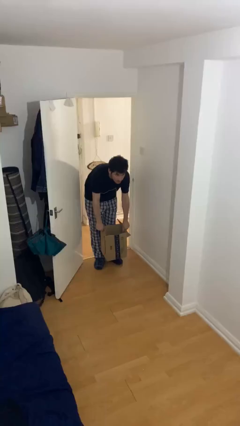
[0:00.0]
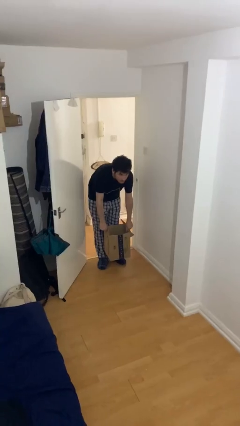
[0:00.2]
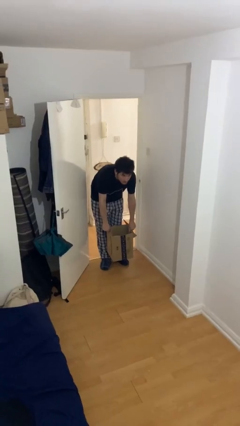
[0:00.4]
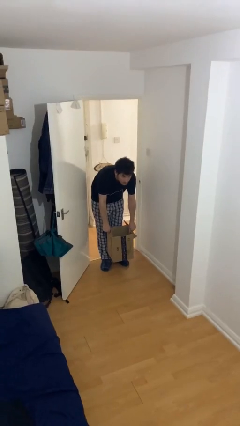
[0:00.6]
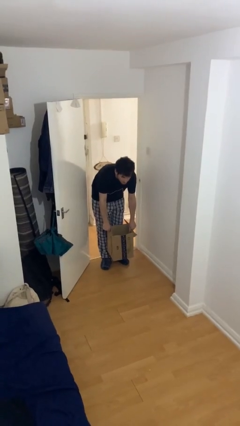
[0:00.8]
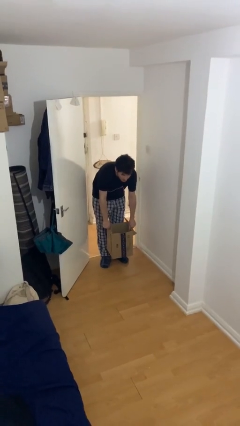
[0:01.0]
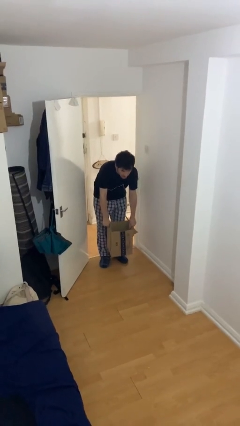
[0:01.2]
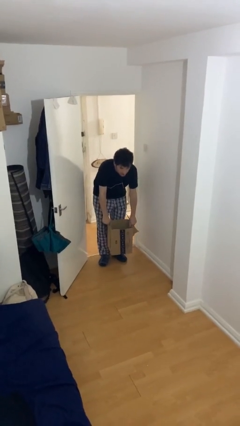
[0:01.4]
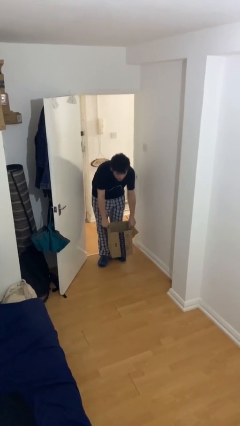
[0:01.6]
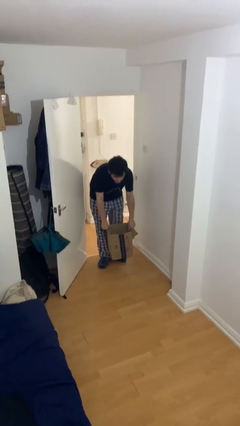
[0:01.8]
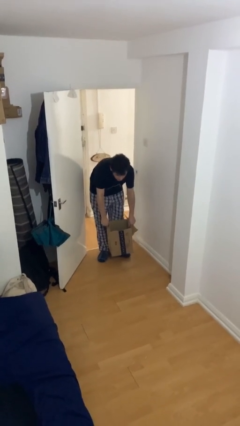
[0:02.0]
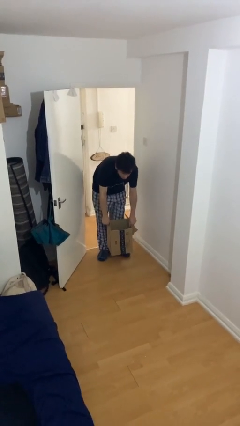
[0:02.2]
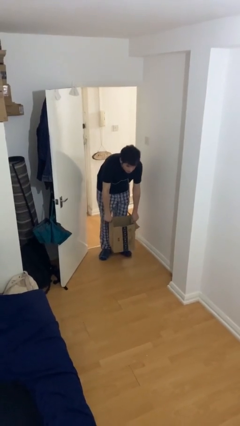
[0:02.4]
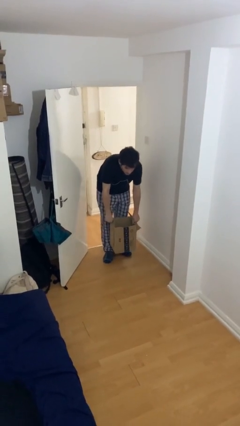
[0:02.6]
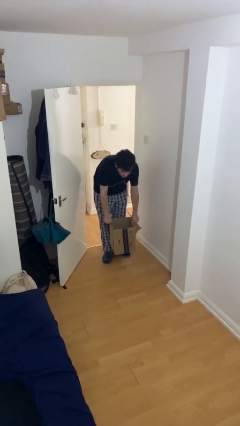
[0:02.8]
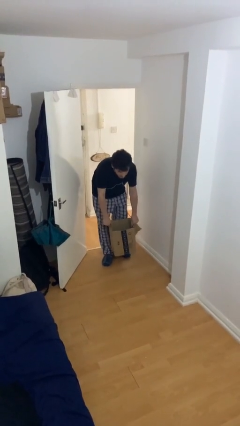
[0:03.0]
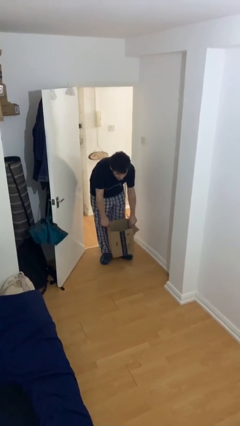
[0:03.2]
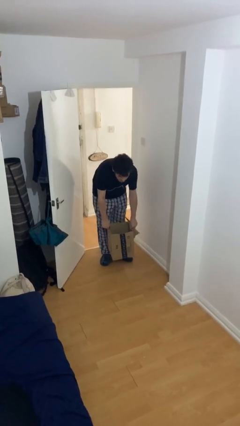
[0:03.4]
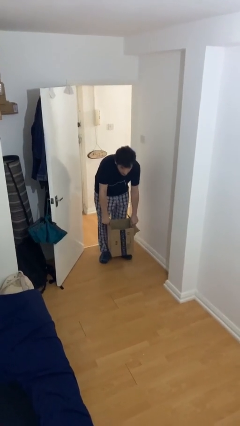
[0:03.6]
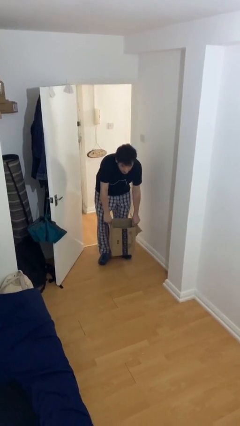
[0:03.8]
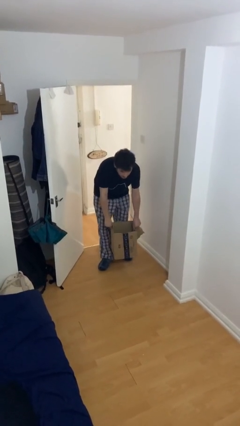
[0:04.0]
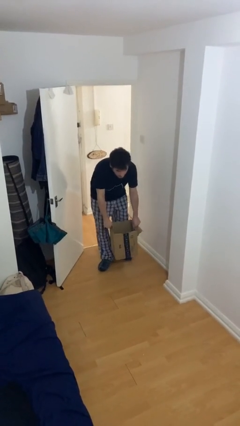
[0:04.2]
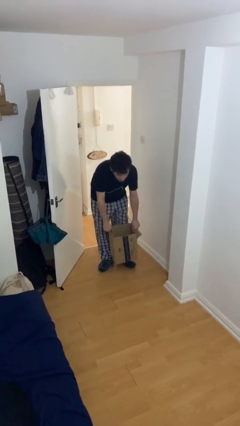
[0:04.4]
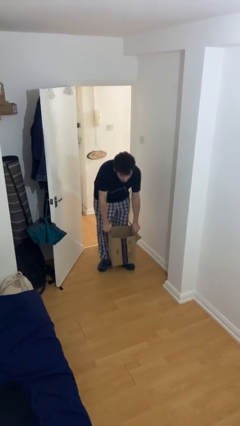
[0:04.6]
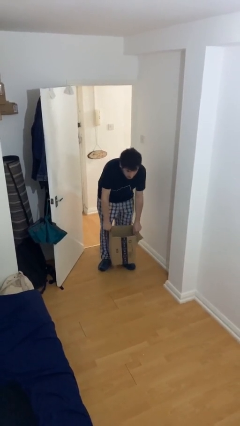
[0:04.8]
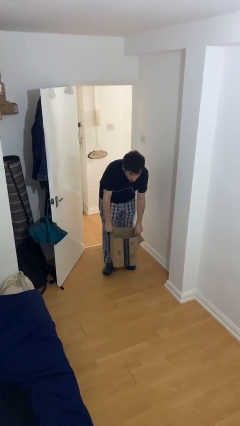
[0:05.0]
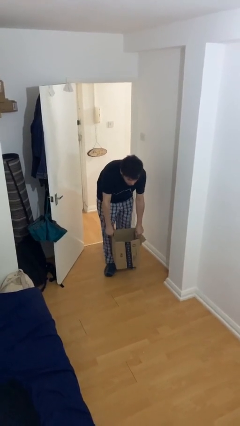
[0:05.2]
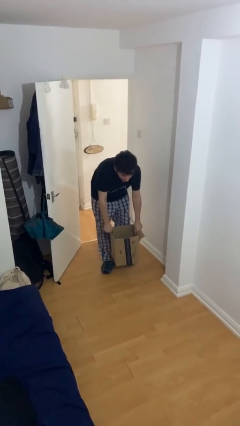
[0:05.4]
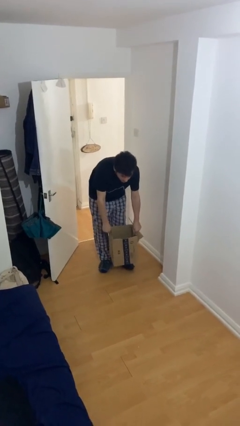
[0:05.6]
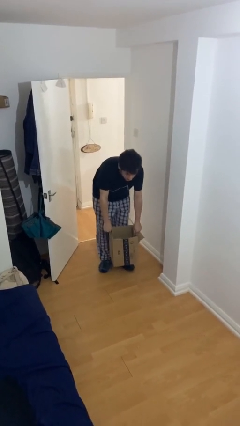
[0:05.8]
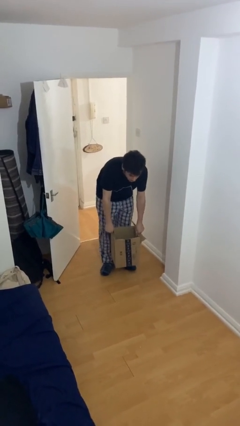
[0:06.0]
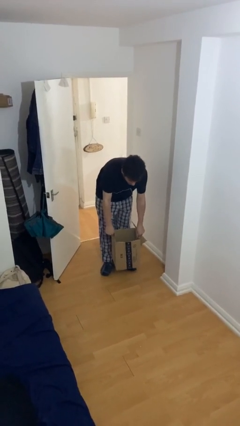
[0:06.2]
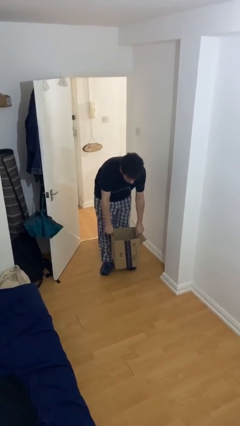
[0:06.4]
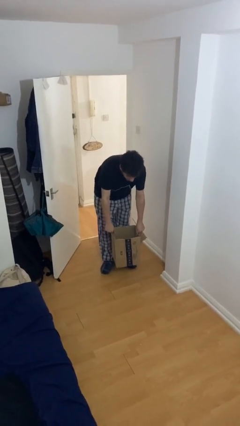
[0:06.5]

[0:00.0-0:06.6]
person carries heavy object

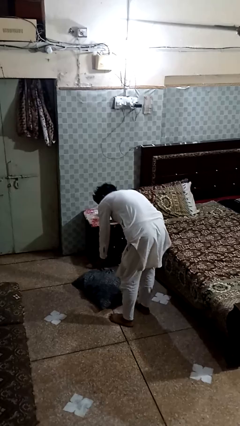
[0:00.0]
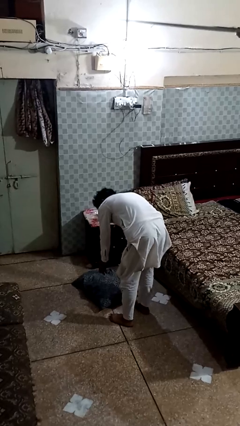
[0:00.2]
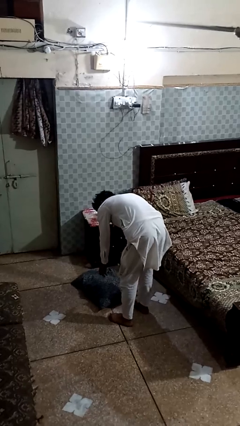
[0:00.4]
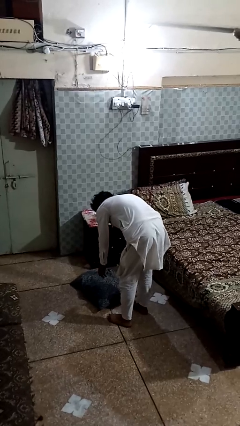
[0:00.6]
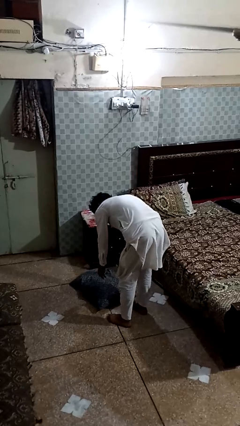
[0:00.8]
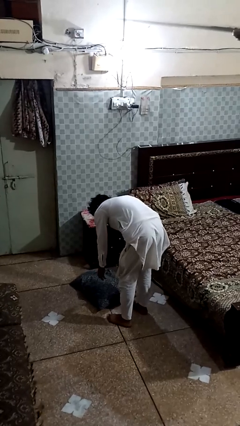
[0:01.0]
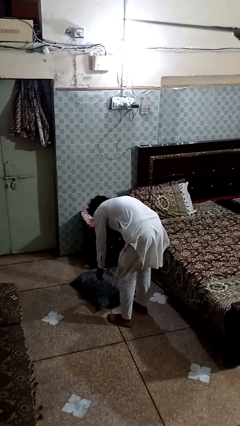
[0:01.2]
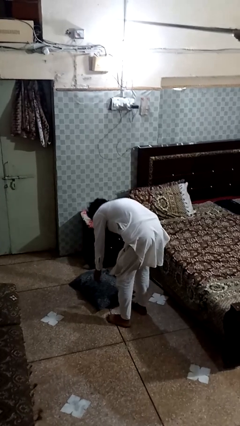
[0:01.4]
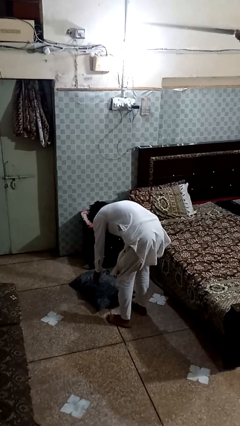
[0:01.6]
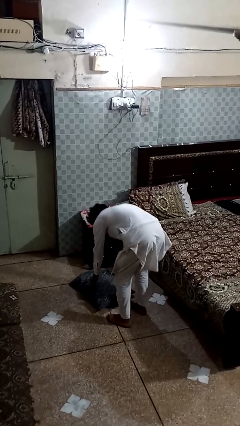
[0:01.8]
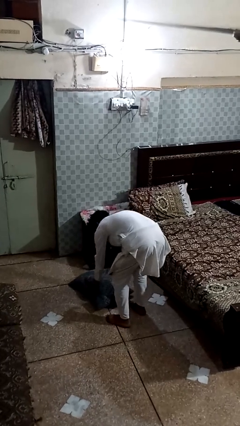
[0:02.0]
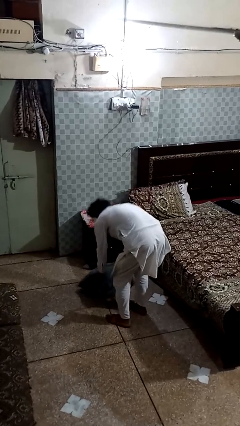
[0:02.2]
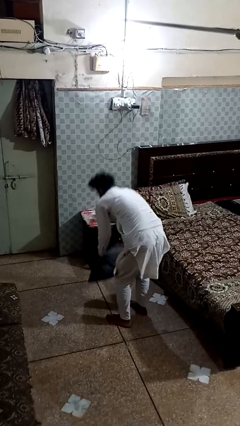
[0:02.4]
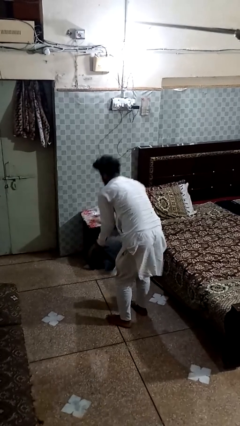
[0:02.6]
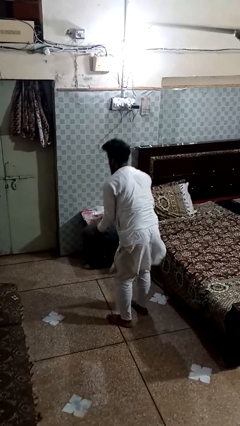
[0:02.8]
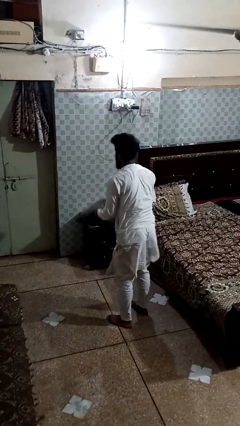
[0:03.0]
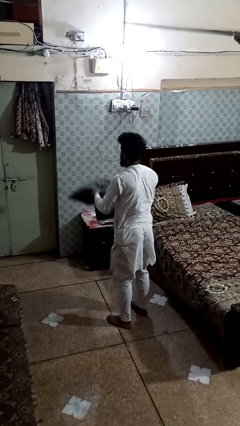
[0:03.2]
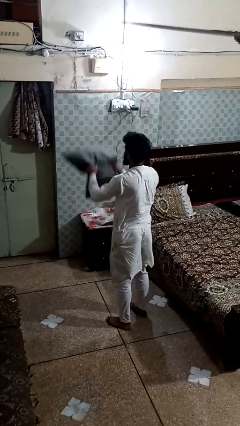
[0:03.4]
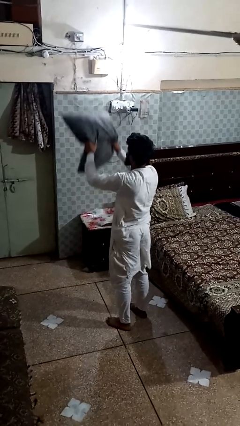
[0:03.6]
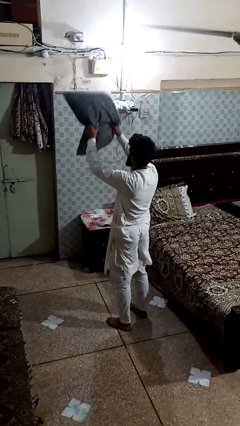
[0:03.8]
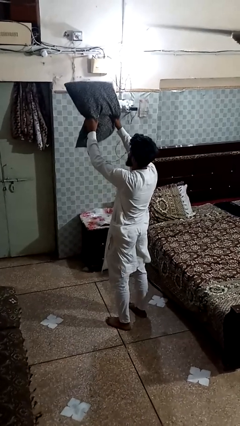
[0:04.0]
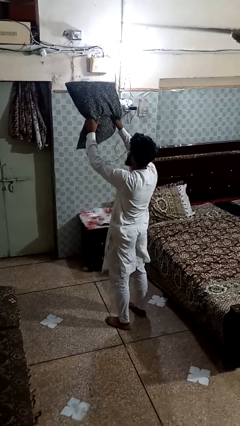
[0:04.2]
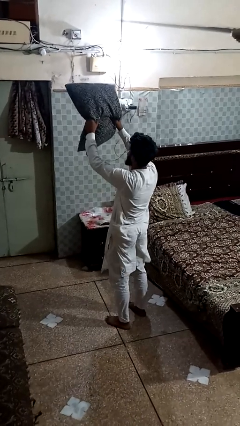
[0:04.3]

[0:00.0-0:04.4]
person picks up object from floor

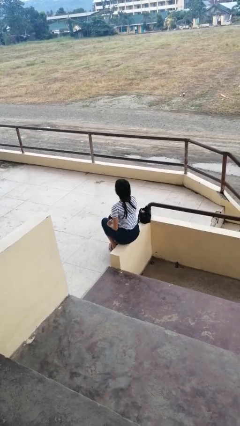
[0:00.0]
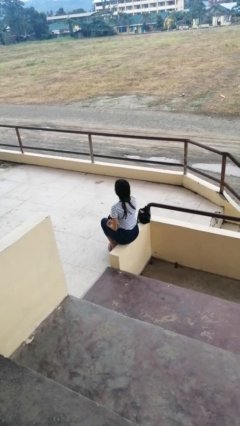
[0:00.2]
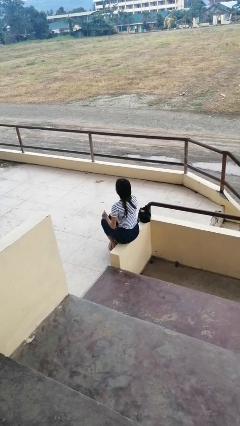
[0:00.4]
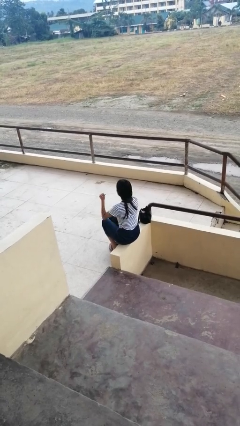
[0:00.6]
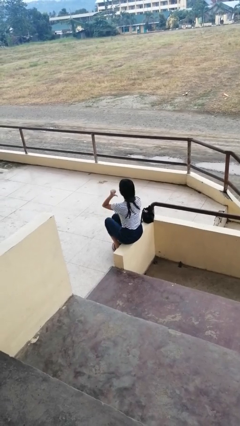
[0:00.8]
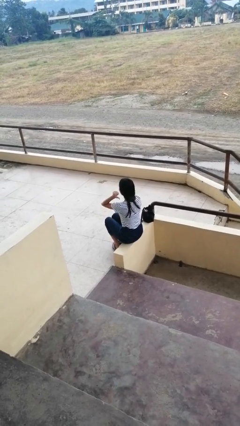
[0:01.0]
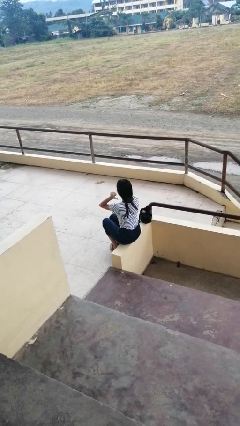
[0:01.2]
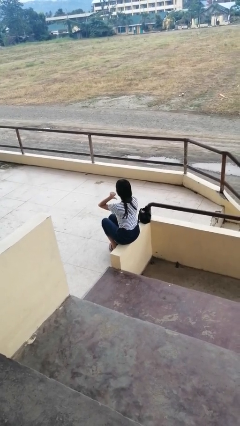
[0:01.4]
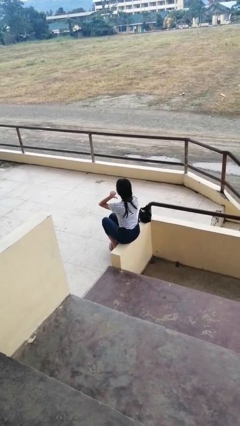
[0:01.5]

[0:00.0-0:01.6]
person gestures behind me

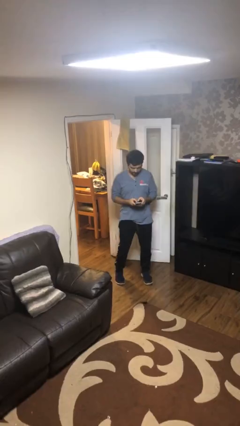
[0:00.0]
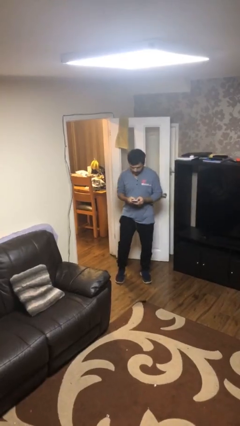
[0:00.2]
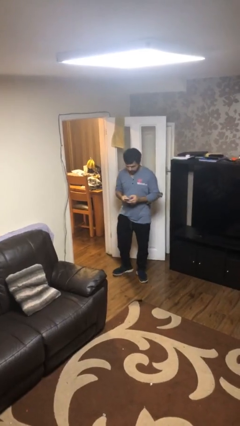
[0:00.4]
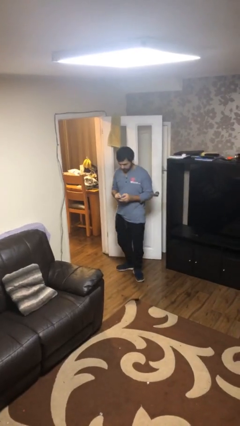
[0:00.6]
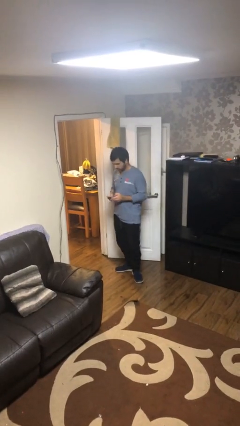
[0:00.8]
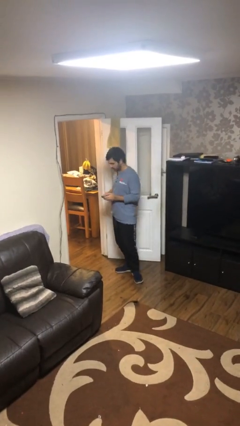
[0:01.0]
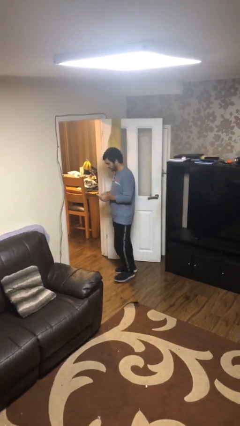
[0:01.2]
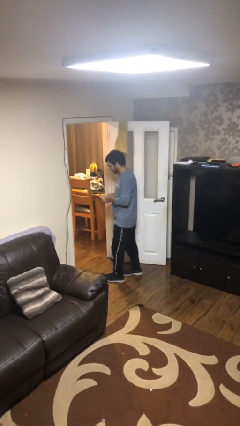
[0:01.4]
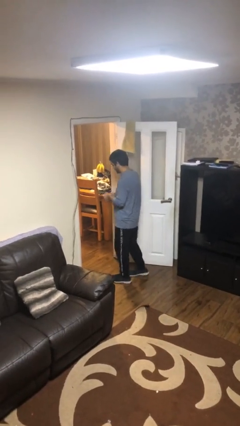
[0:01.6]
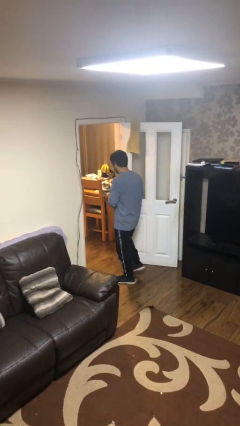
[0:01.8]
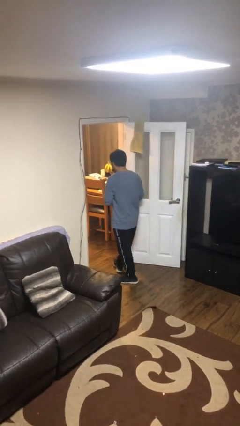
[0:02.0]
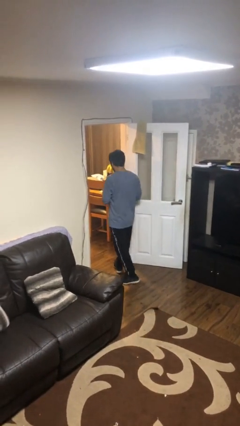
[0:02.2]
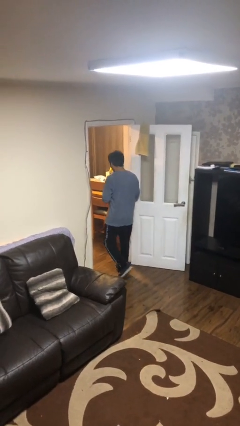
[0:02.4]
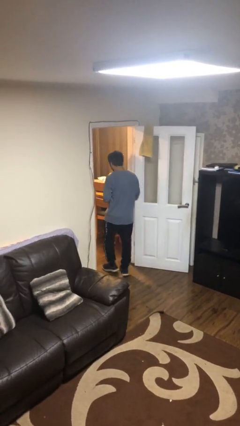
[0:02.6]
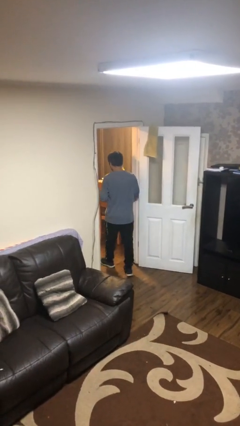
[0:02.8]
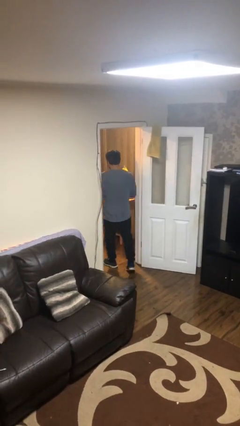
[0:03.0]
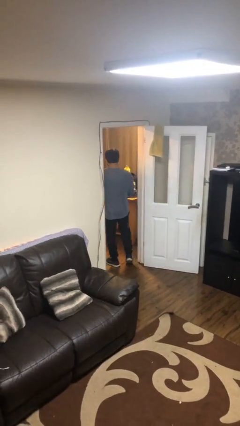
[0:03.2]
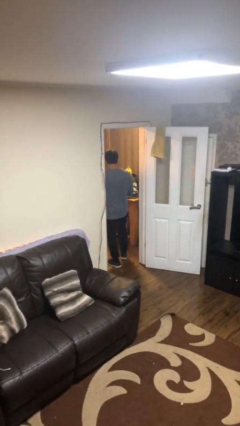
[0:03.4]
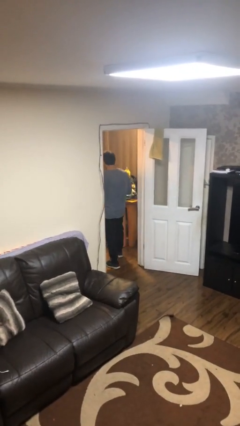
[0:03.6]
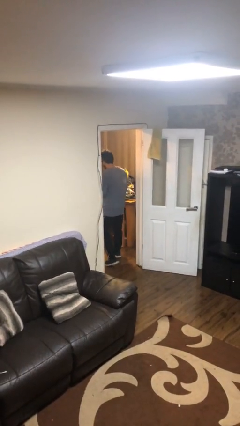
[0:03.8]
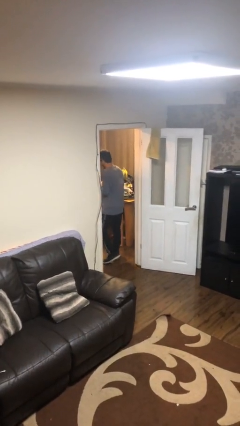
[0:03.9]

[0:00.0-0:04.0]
person exits scene through structure

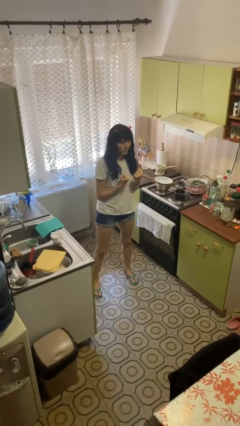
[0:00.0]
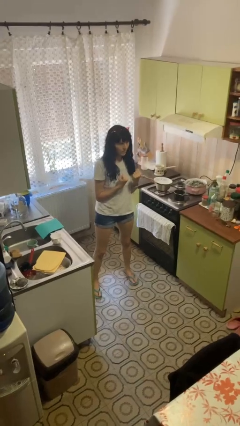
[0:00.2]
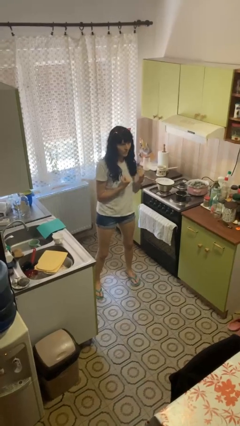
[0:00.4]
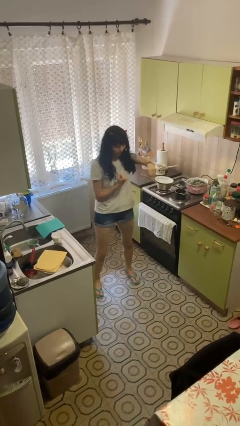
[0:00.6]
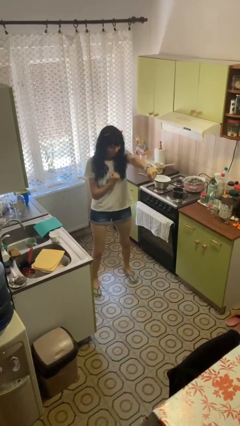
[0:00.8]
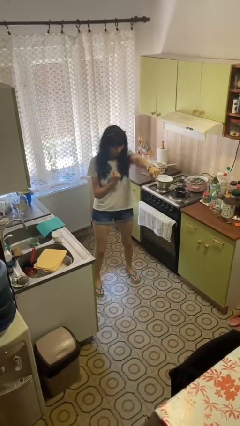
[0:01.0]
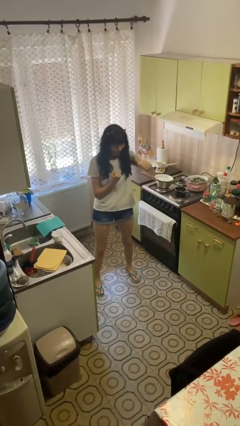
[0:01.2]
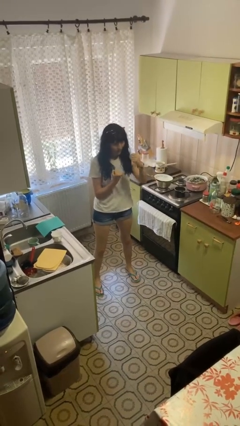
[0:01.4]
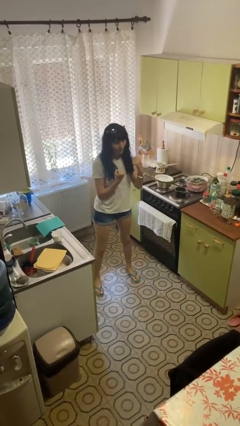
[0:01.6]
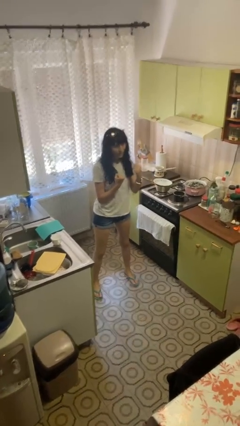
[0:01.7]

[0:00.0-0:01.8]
person punches
